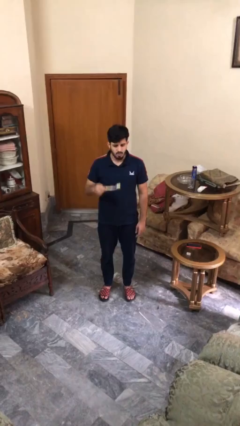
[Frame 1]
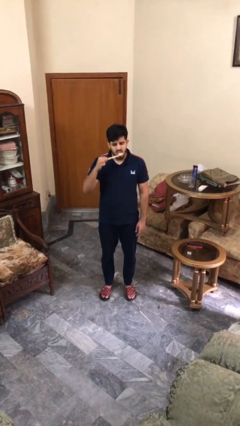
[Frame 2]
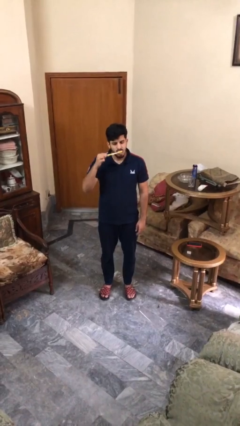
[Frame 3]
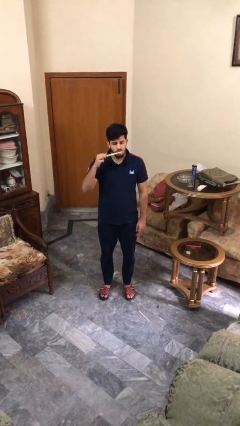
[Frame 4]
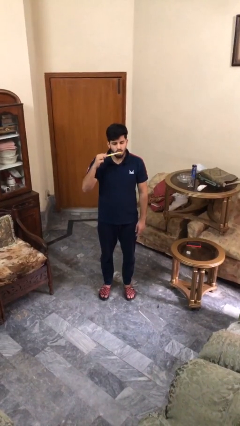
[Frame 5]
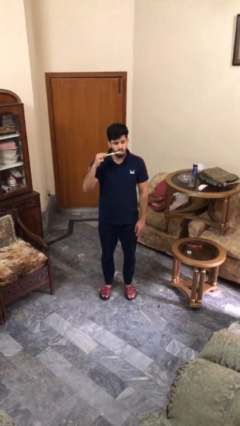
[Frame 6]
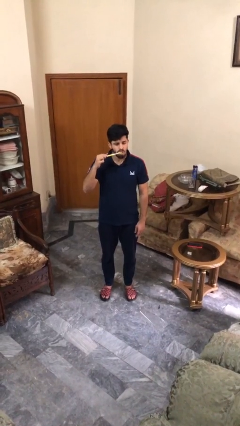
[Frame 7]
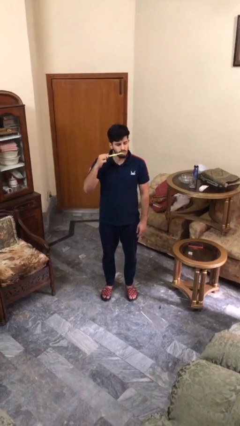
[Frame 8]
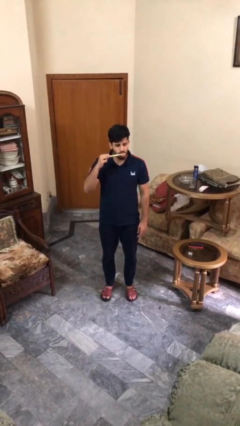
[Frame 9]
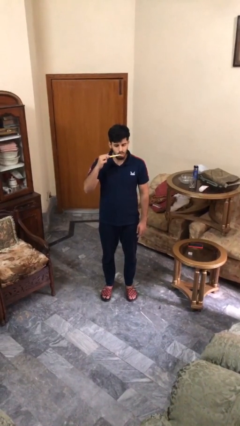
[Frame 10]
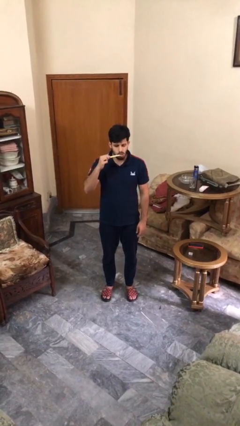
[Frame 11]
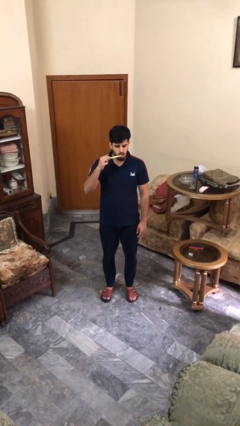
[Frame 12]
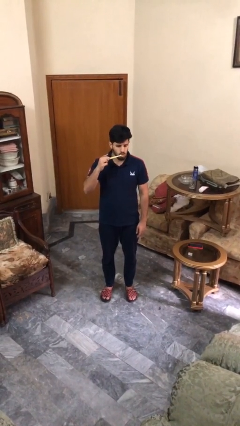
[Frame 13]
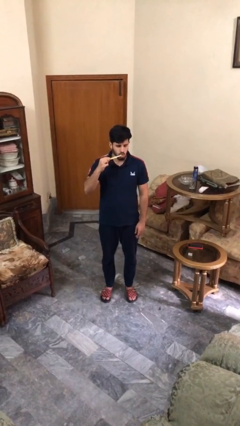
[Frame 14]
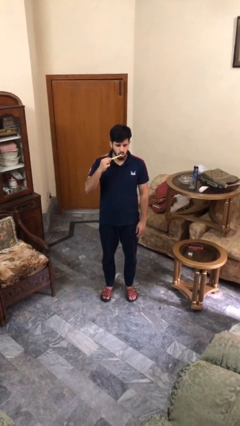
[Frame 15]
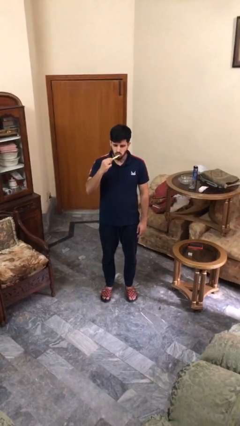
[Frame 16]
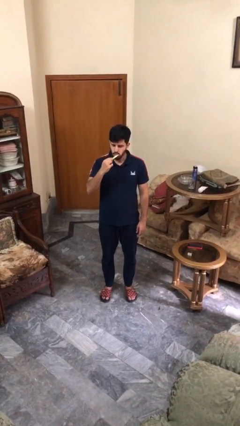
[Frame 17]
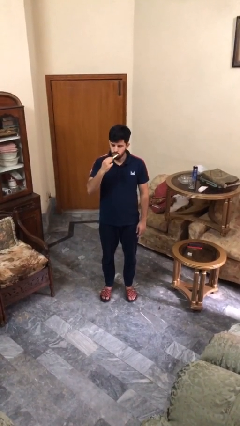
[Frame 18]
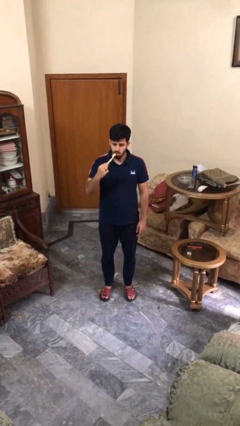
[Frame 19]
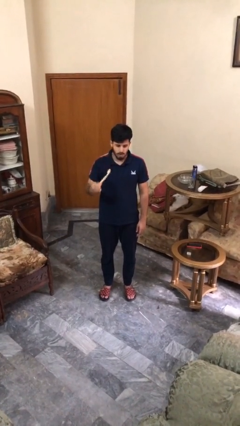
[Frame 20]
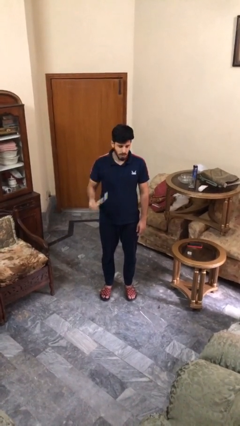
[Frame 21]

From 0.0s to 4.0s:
person brushes teeth

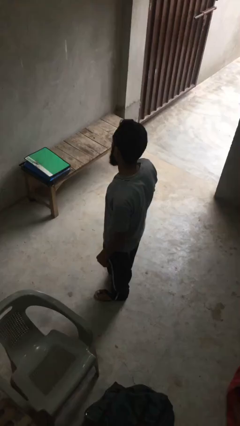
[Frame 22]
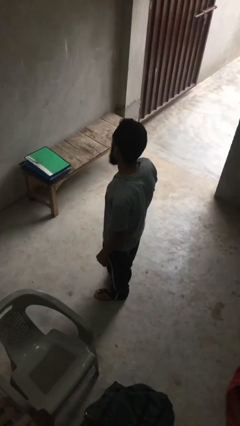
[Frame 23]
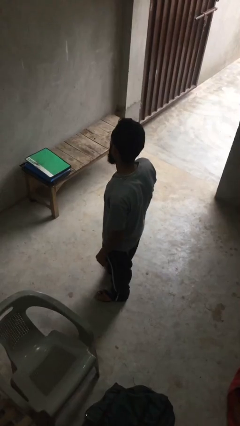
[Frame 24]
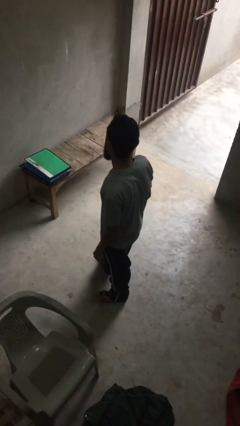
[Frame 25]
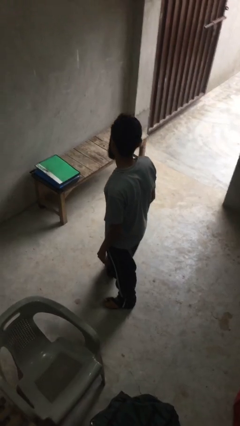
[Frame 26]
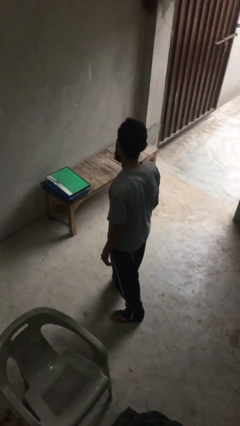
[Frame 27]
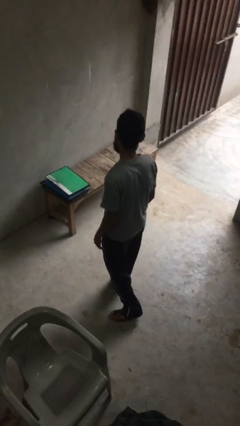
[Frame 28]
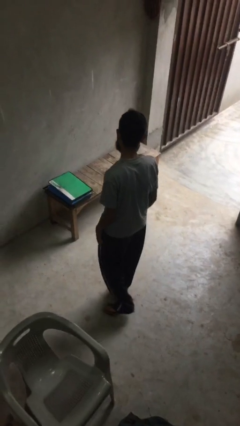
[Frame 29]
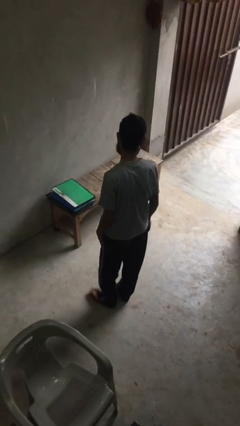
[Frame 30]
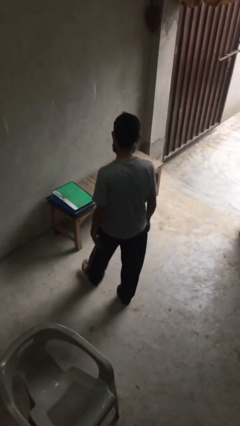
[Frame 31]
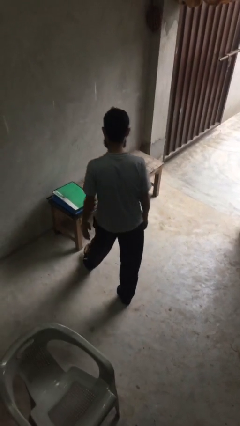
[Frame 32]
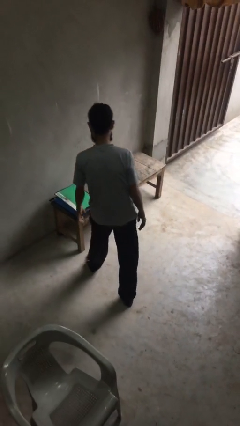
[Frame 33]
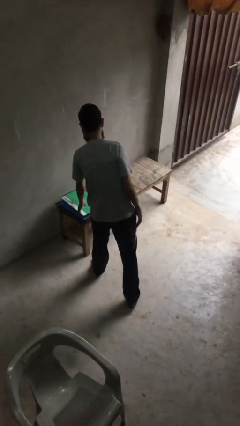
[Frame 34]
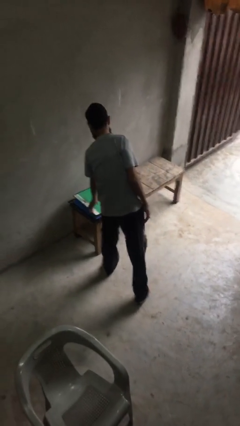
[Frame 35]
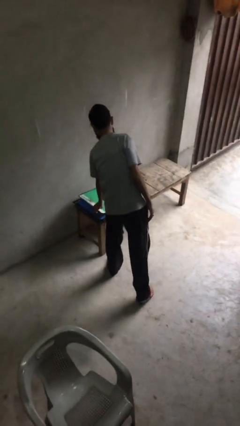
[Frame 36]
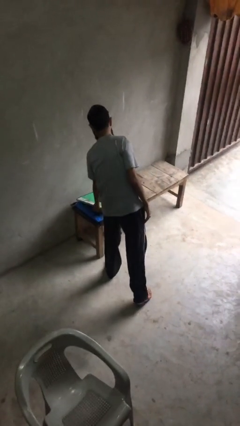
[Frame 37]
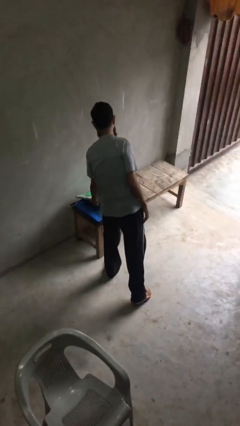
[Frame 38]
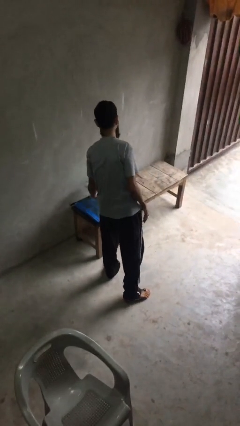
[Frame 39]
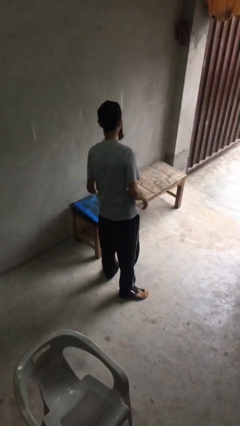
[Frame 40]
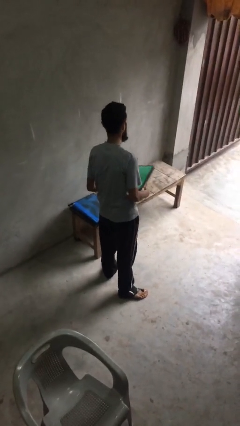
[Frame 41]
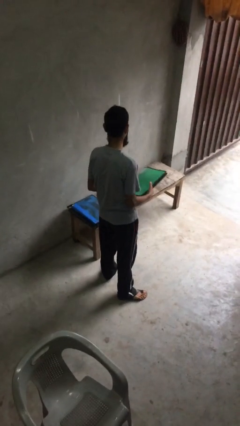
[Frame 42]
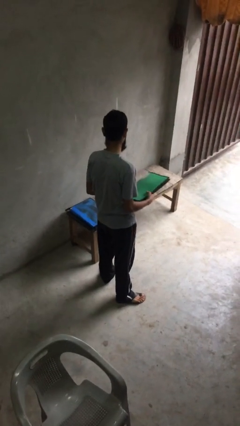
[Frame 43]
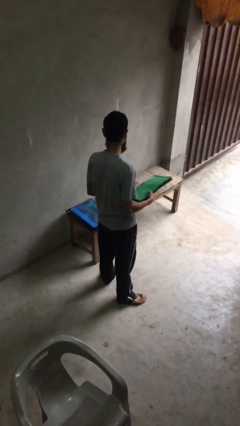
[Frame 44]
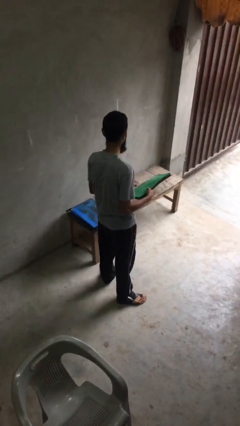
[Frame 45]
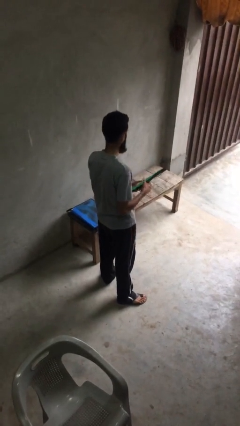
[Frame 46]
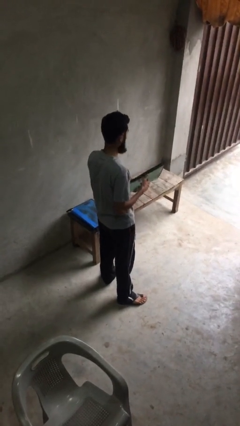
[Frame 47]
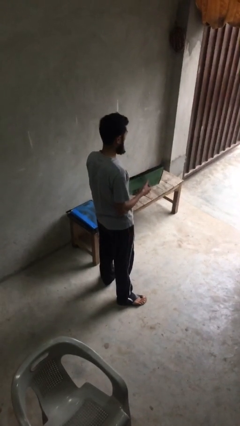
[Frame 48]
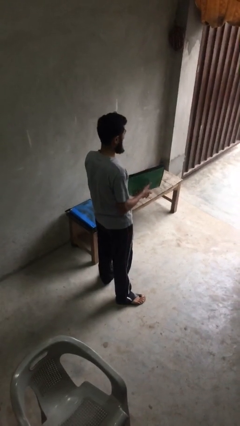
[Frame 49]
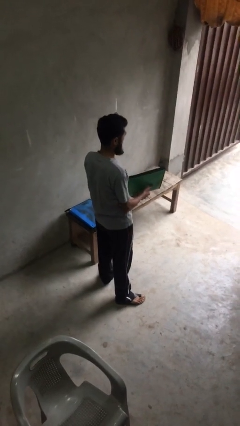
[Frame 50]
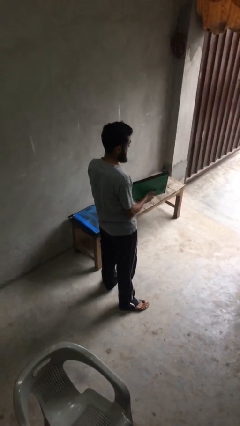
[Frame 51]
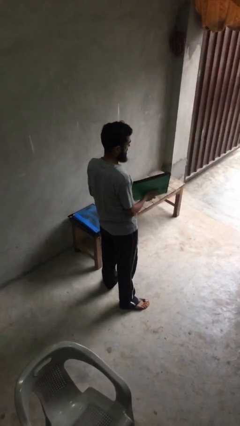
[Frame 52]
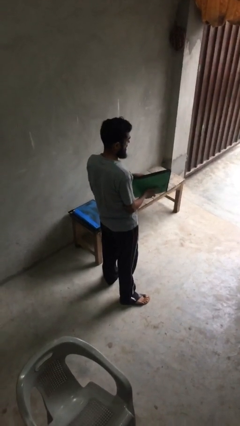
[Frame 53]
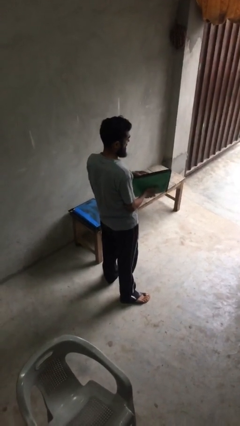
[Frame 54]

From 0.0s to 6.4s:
person puts down object on table

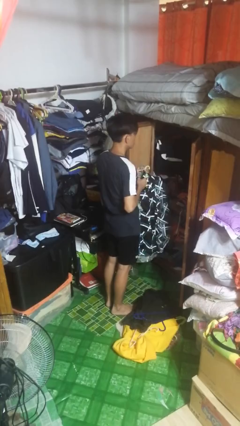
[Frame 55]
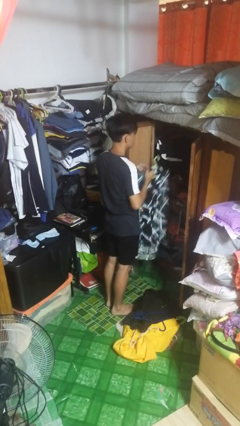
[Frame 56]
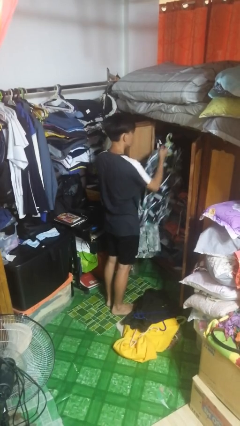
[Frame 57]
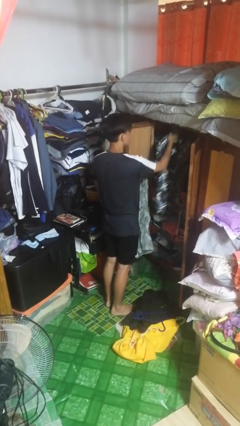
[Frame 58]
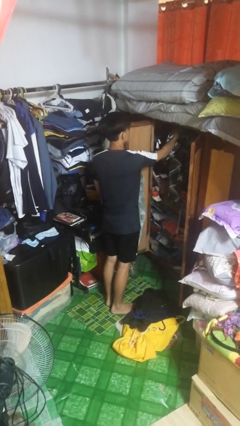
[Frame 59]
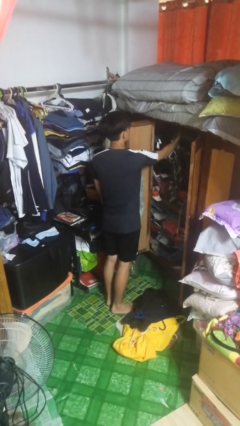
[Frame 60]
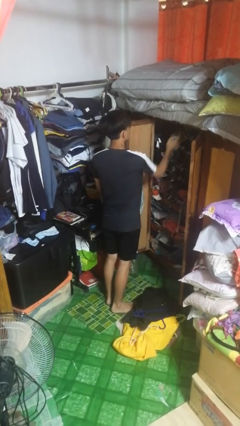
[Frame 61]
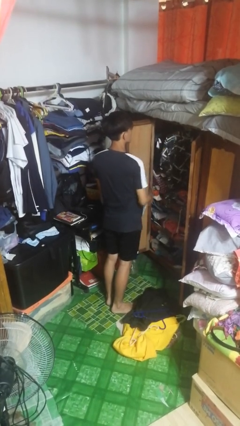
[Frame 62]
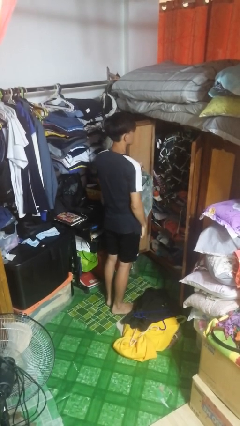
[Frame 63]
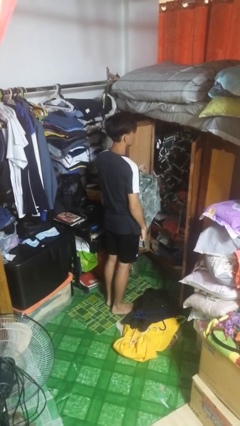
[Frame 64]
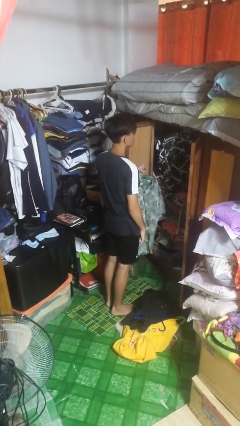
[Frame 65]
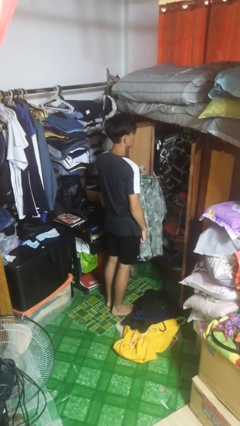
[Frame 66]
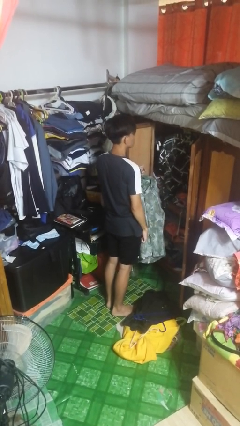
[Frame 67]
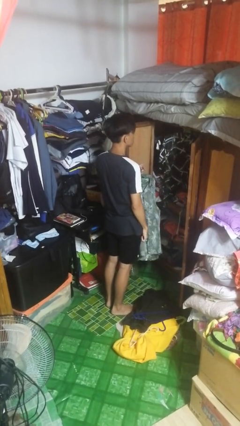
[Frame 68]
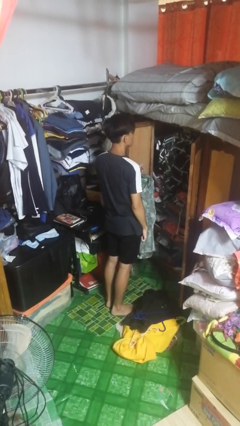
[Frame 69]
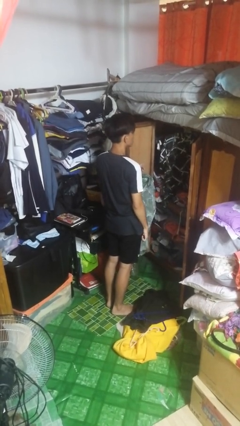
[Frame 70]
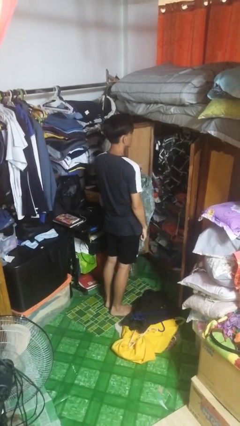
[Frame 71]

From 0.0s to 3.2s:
person puts clothes into closet

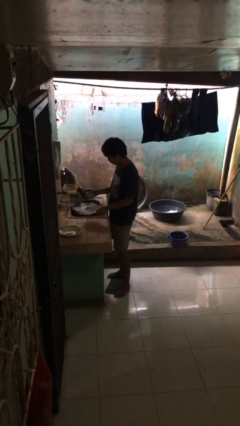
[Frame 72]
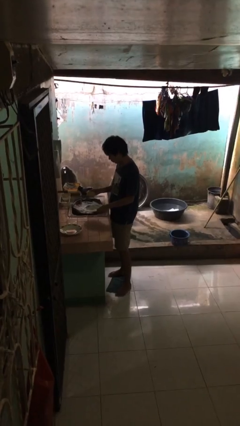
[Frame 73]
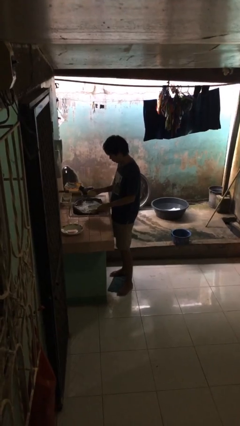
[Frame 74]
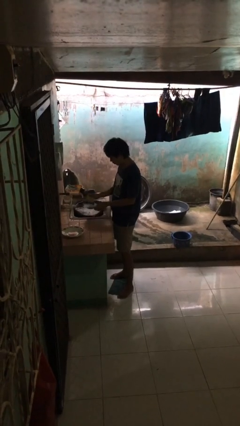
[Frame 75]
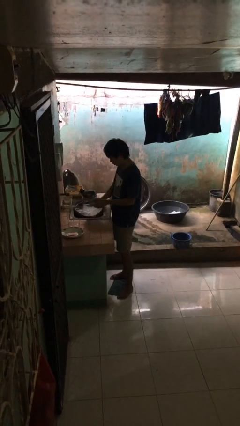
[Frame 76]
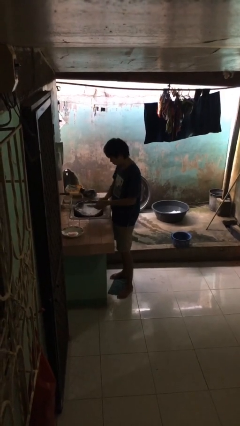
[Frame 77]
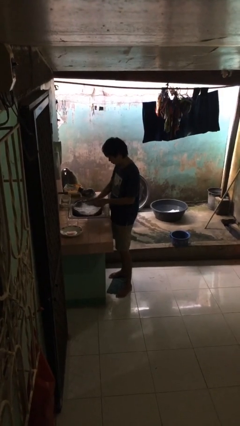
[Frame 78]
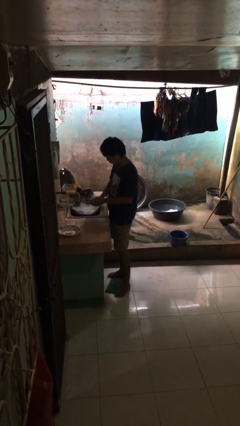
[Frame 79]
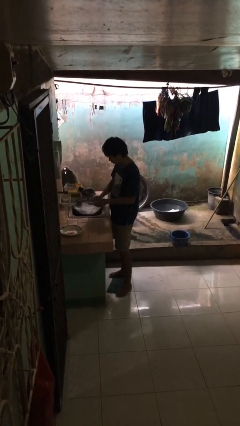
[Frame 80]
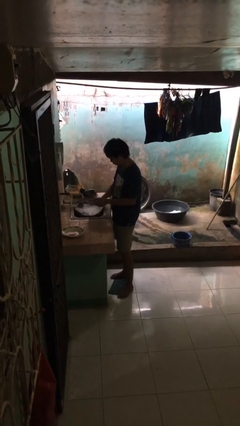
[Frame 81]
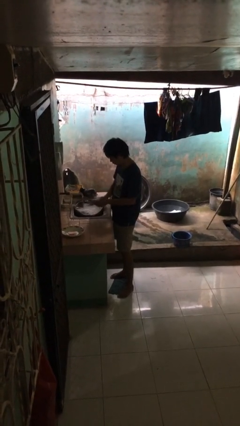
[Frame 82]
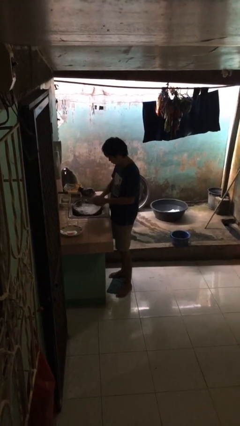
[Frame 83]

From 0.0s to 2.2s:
person washes dish

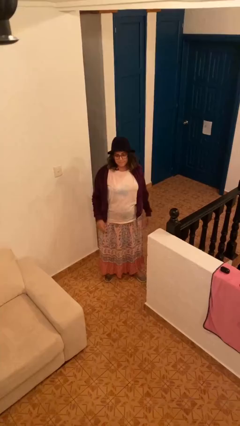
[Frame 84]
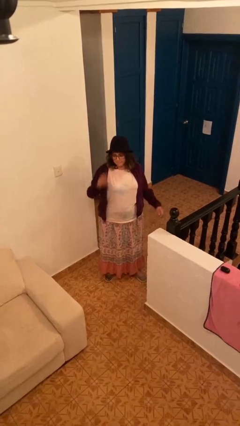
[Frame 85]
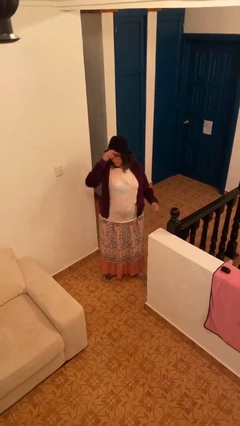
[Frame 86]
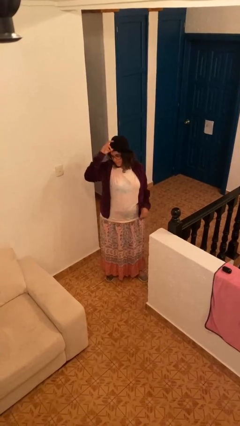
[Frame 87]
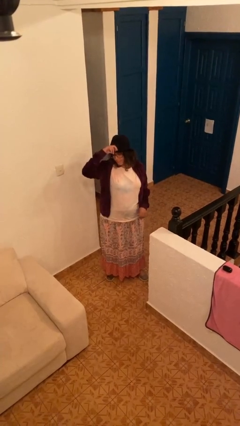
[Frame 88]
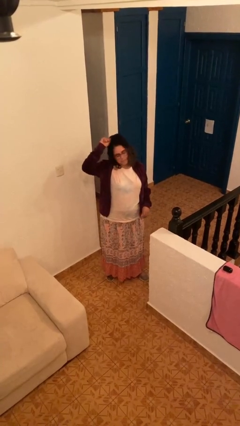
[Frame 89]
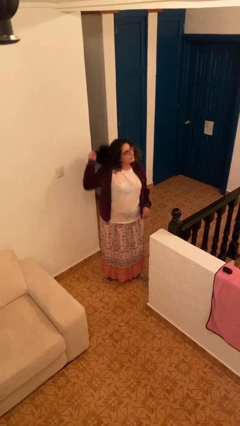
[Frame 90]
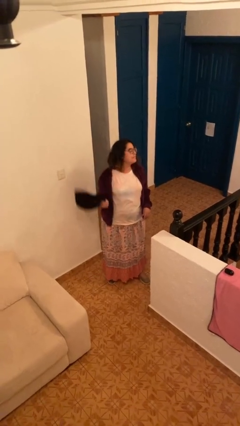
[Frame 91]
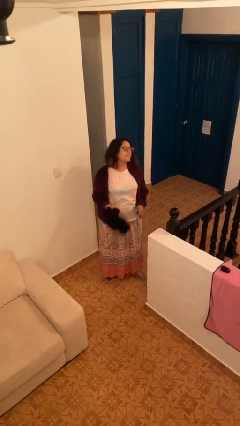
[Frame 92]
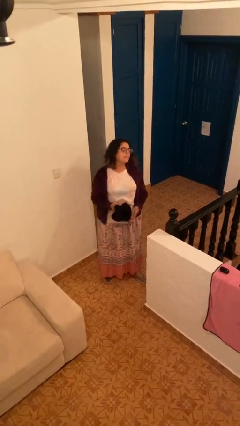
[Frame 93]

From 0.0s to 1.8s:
person takes off hat
